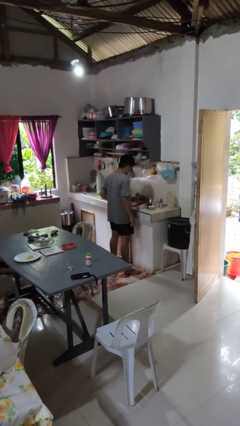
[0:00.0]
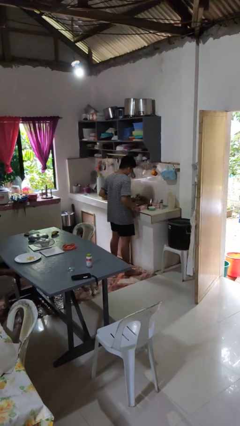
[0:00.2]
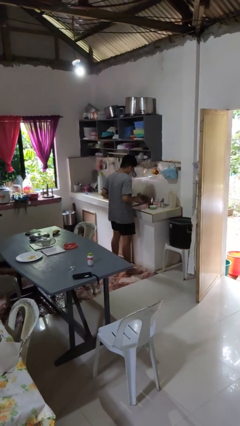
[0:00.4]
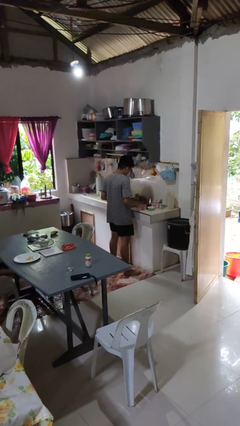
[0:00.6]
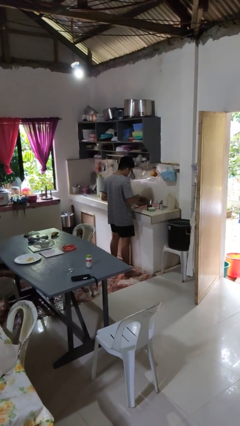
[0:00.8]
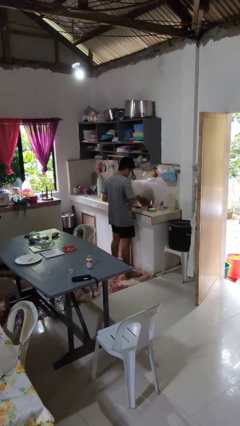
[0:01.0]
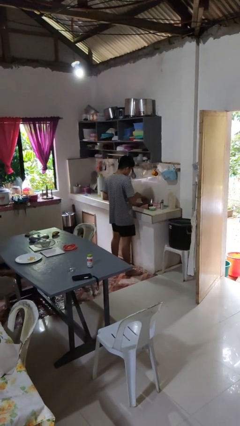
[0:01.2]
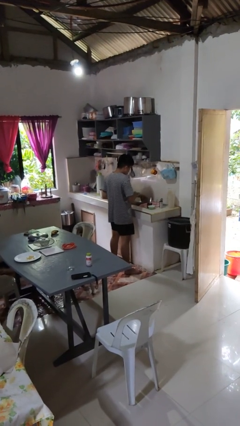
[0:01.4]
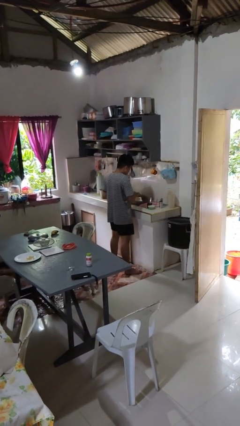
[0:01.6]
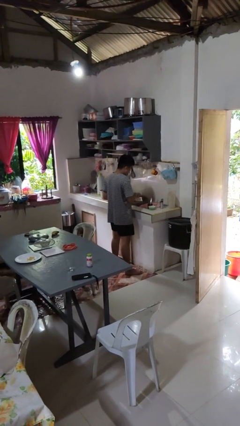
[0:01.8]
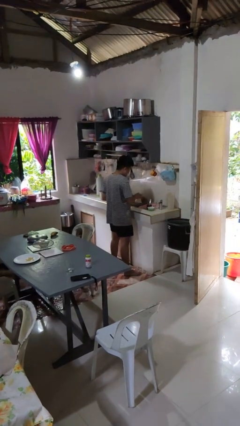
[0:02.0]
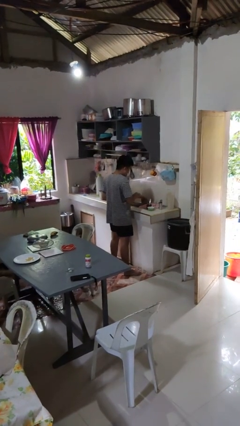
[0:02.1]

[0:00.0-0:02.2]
person washes dish

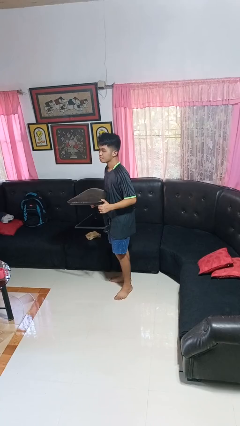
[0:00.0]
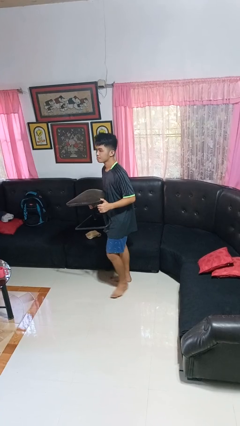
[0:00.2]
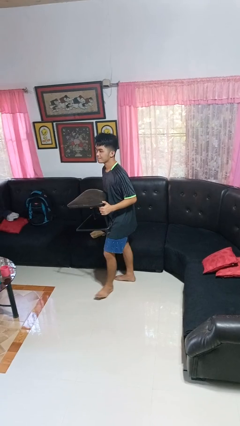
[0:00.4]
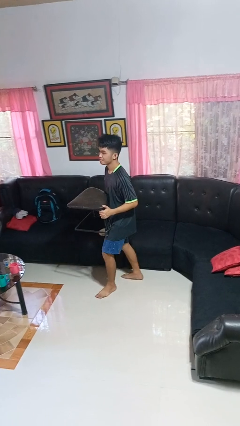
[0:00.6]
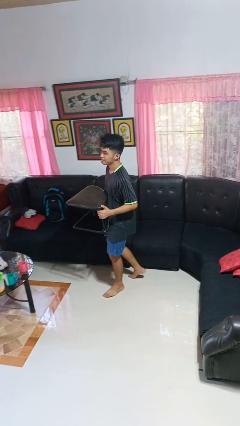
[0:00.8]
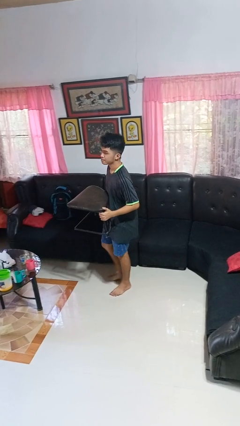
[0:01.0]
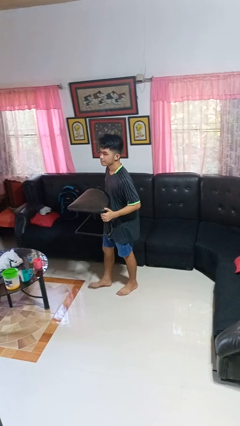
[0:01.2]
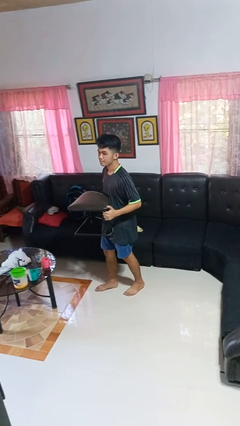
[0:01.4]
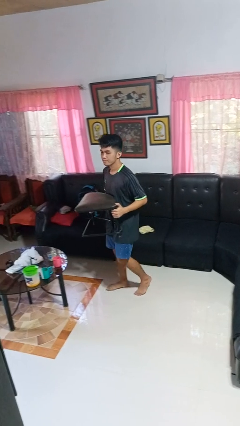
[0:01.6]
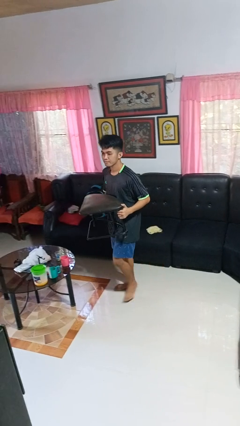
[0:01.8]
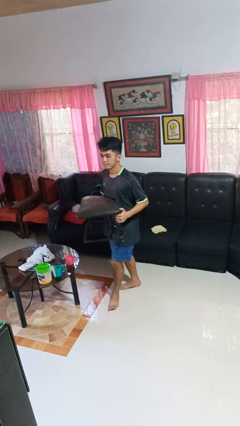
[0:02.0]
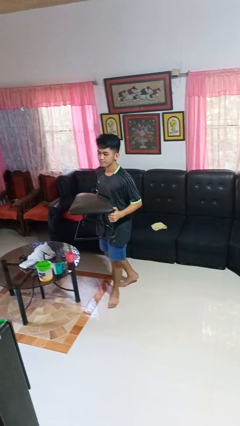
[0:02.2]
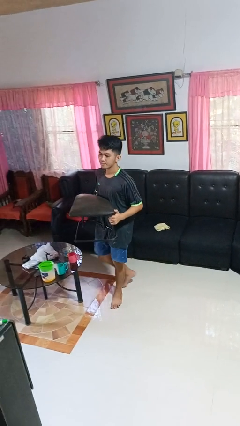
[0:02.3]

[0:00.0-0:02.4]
person carries furniture

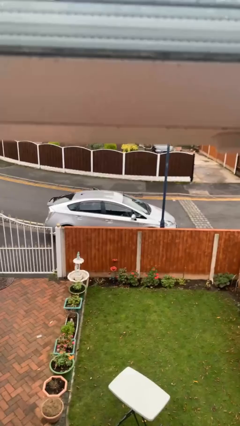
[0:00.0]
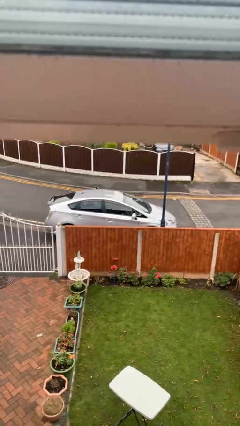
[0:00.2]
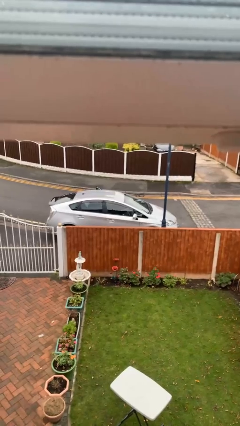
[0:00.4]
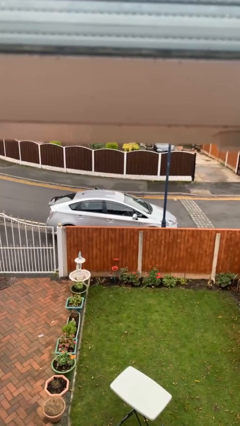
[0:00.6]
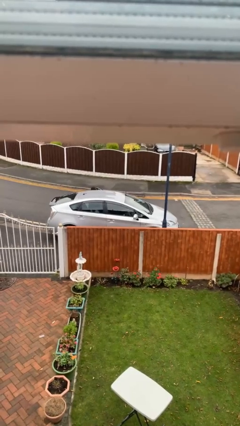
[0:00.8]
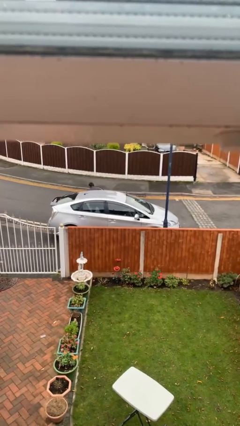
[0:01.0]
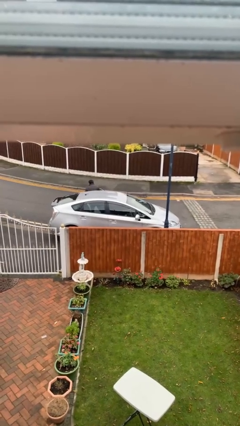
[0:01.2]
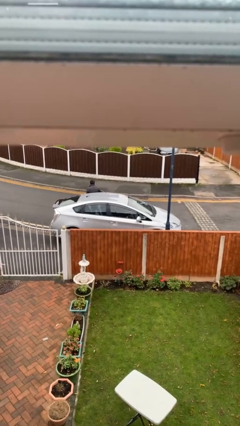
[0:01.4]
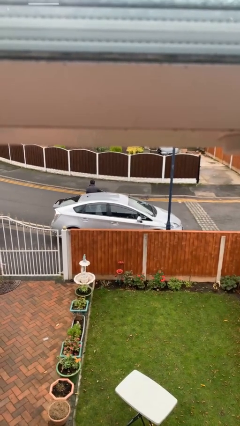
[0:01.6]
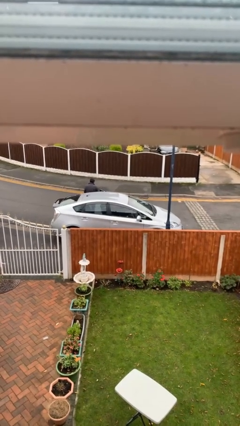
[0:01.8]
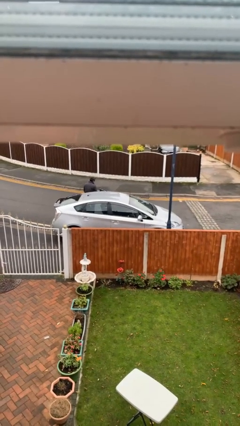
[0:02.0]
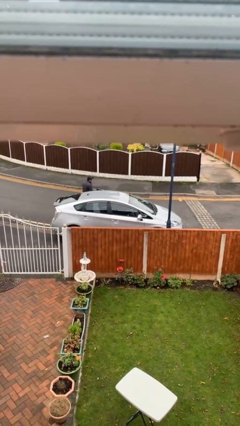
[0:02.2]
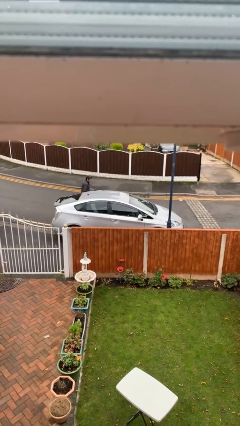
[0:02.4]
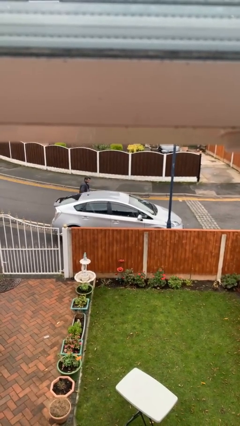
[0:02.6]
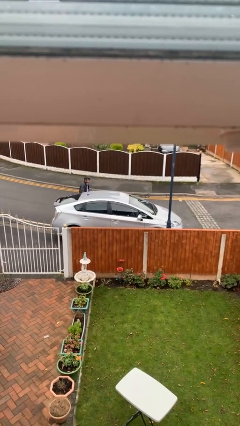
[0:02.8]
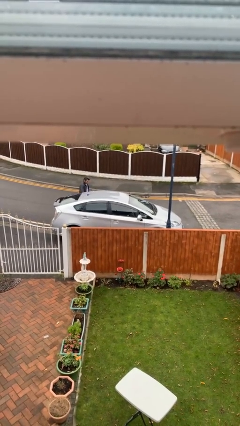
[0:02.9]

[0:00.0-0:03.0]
car drops off person

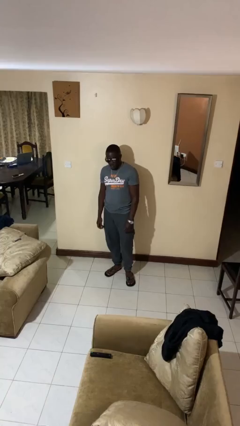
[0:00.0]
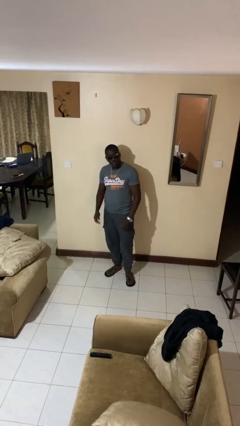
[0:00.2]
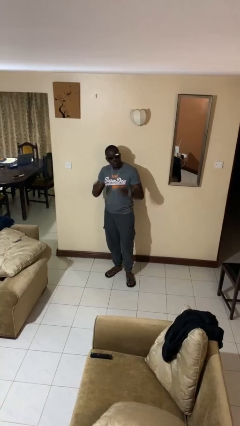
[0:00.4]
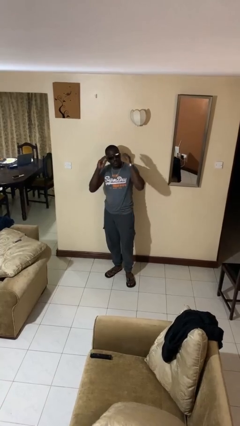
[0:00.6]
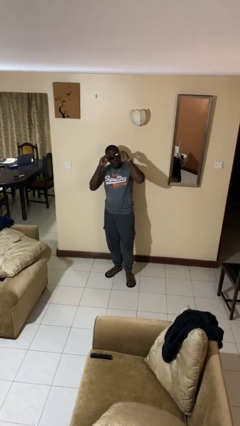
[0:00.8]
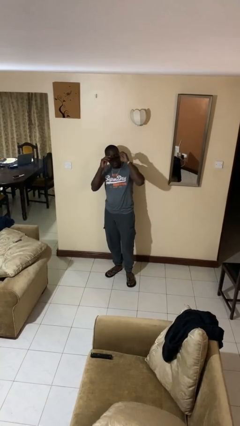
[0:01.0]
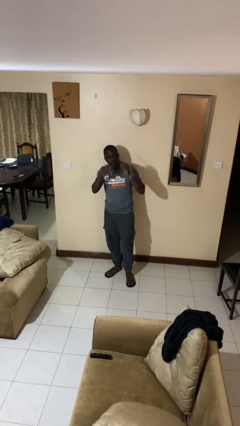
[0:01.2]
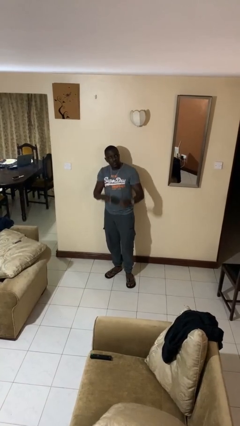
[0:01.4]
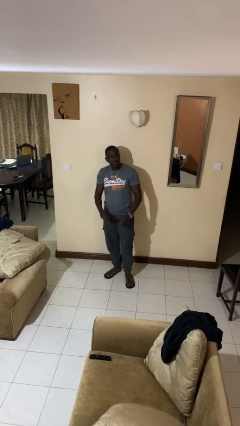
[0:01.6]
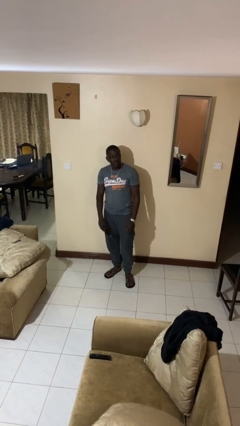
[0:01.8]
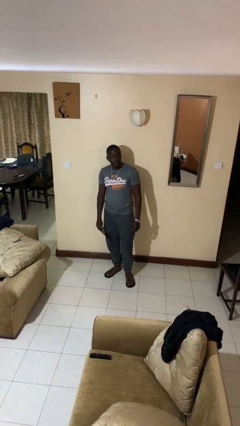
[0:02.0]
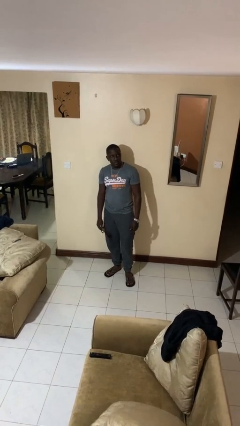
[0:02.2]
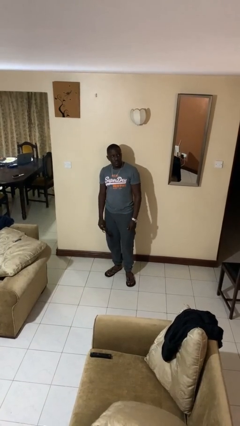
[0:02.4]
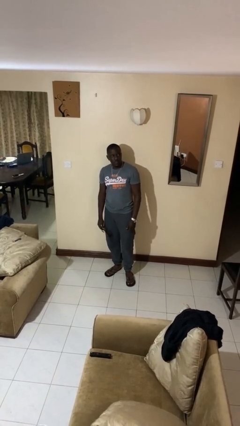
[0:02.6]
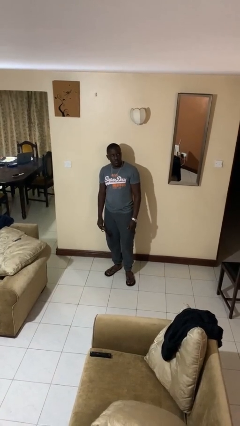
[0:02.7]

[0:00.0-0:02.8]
person takes off sunglasses

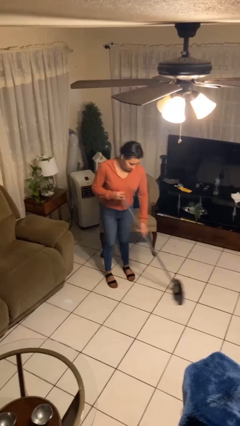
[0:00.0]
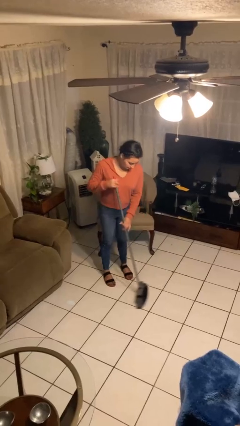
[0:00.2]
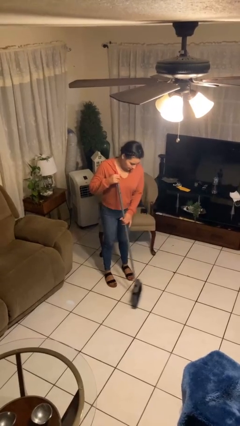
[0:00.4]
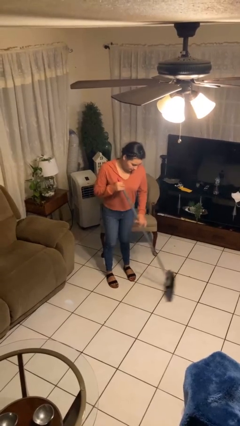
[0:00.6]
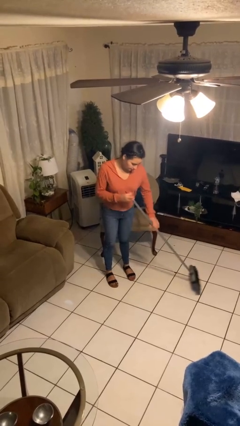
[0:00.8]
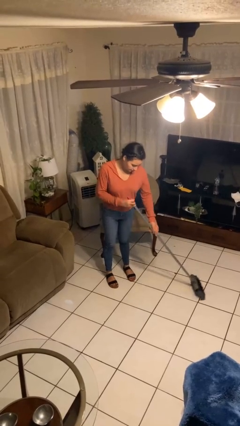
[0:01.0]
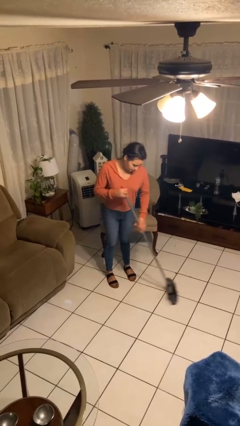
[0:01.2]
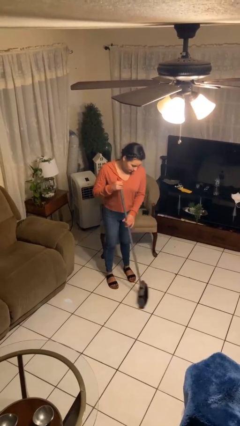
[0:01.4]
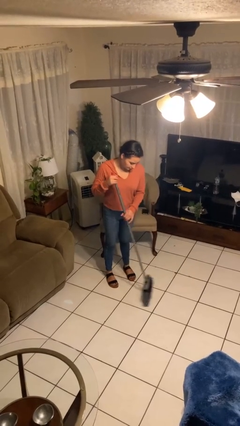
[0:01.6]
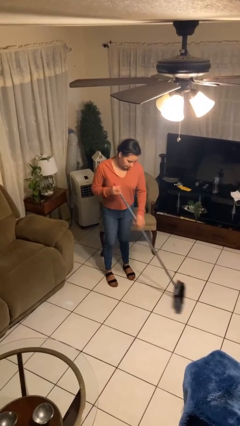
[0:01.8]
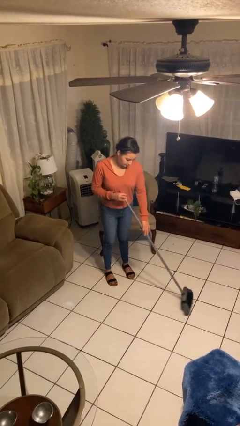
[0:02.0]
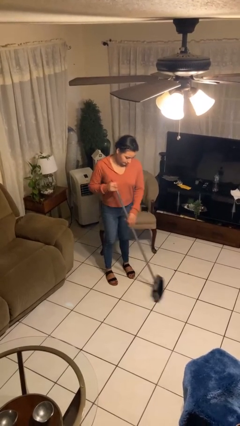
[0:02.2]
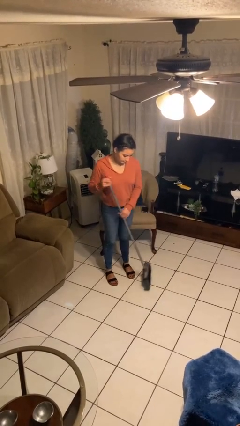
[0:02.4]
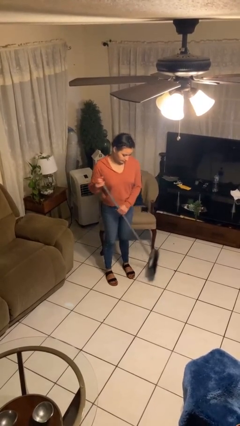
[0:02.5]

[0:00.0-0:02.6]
person sweeps floor

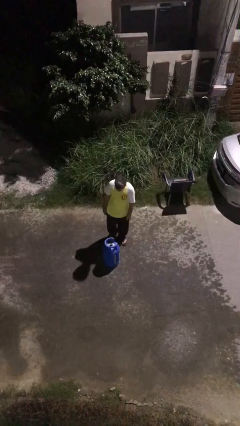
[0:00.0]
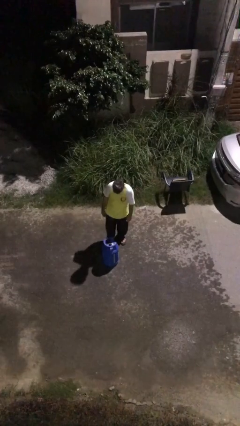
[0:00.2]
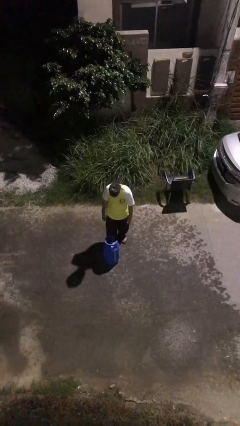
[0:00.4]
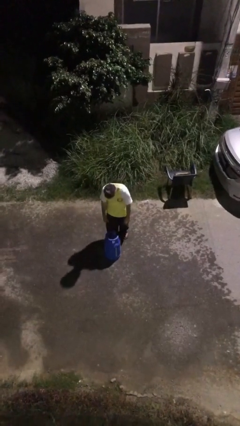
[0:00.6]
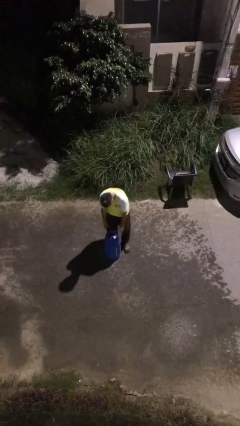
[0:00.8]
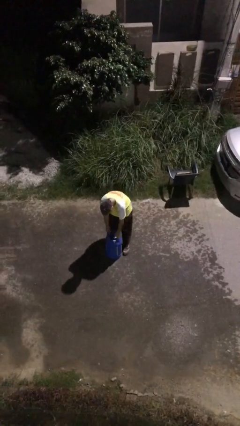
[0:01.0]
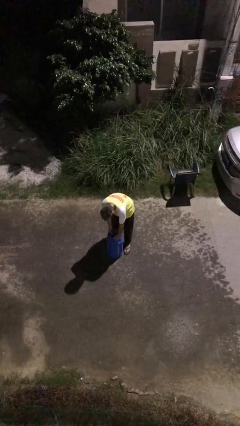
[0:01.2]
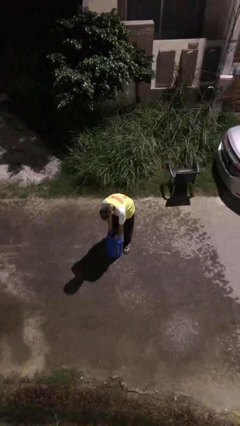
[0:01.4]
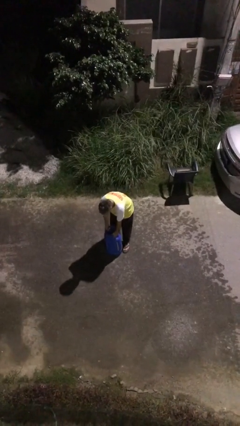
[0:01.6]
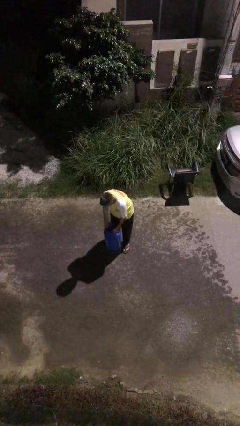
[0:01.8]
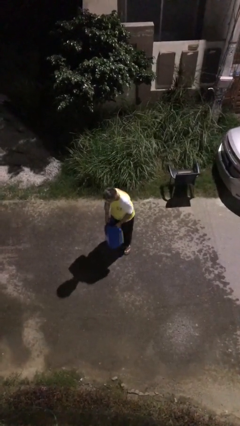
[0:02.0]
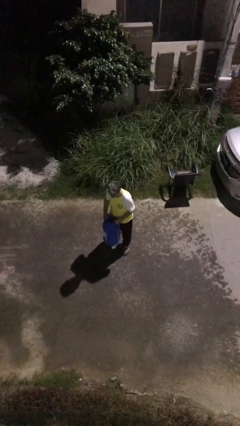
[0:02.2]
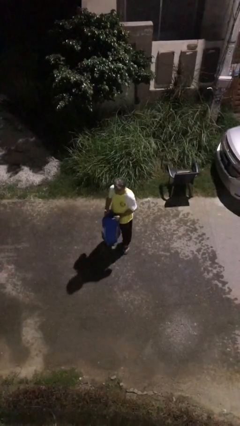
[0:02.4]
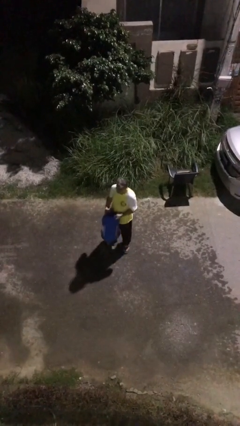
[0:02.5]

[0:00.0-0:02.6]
person picks up object from floor

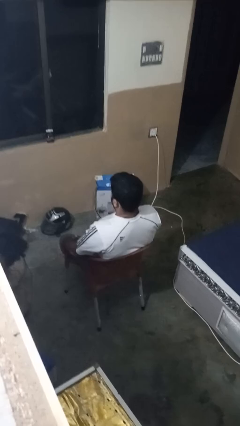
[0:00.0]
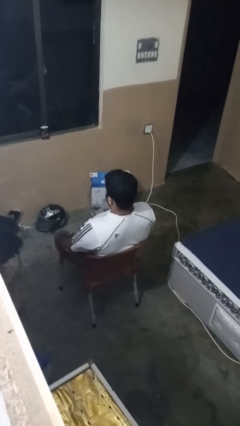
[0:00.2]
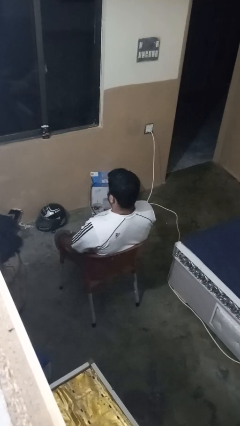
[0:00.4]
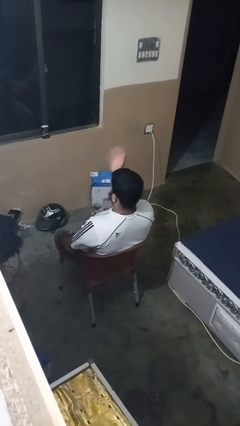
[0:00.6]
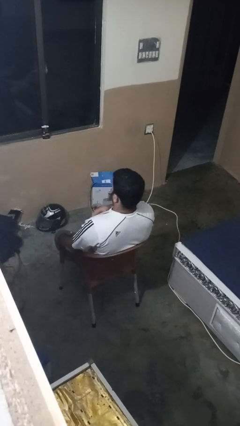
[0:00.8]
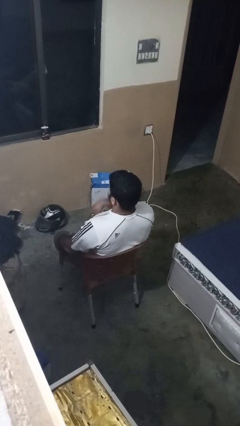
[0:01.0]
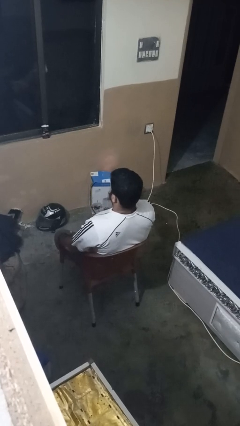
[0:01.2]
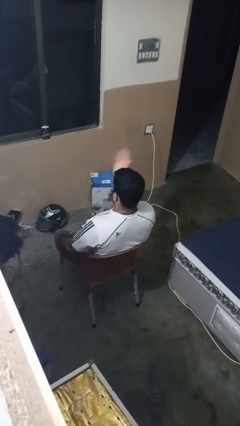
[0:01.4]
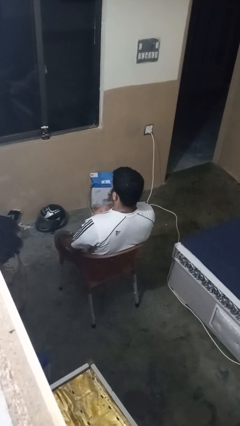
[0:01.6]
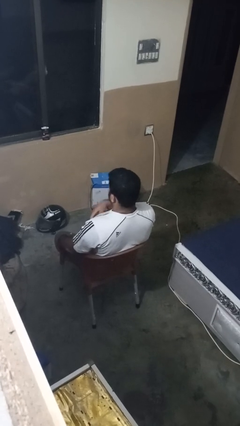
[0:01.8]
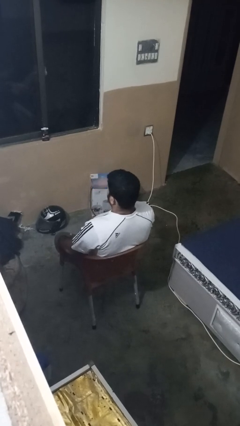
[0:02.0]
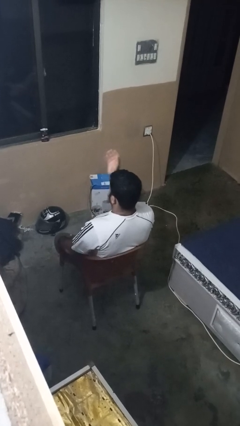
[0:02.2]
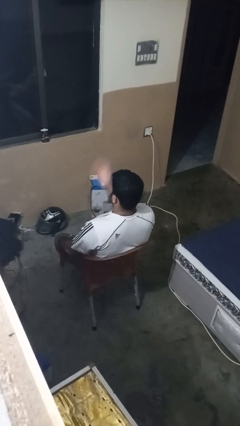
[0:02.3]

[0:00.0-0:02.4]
person drums on chest
